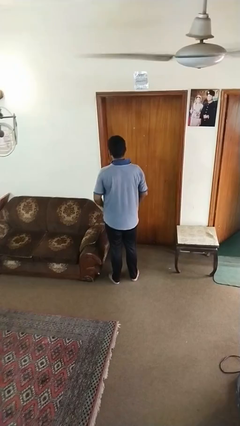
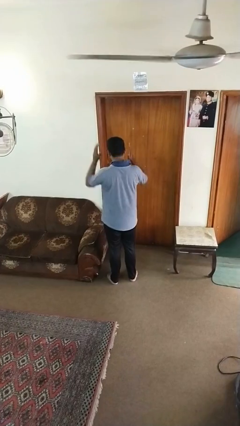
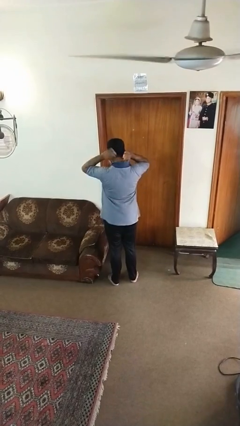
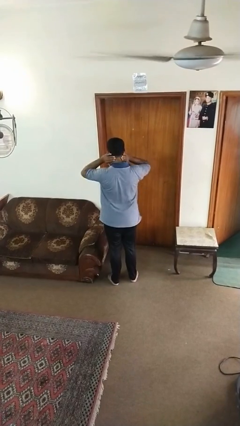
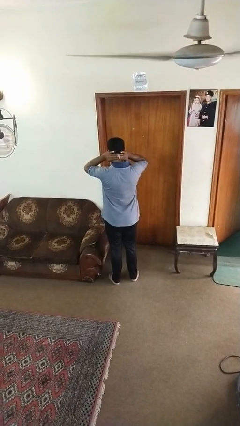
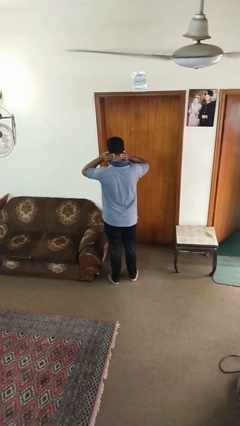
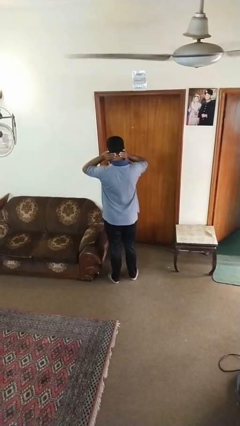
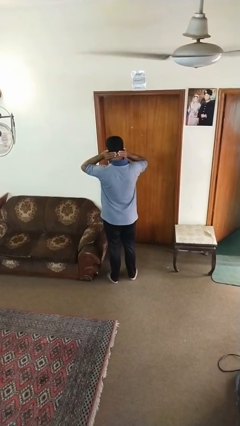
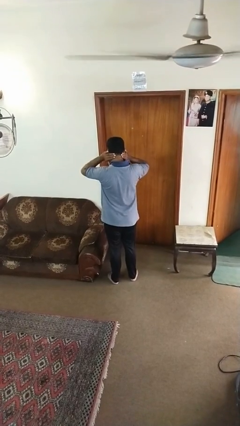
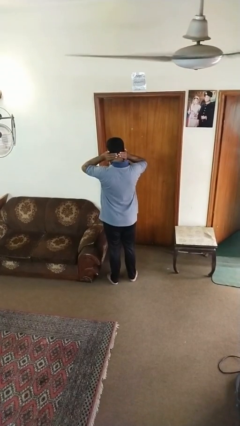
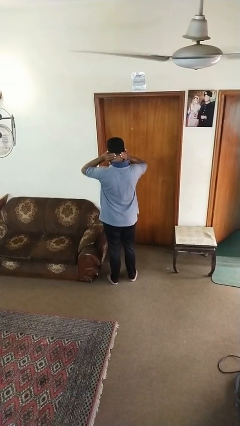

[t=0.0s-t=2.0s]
person rubs neck

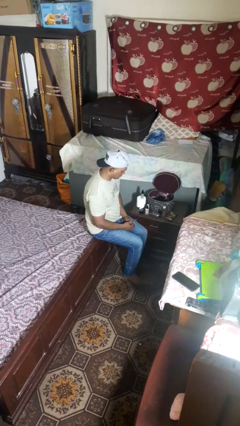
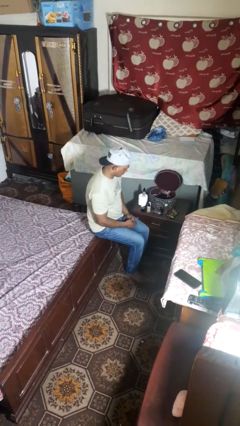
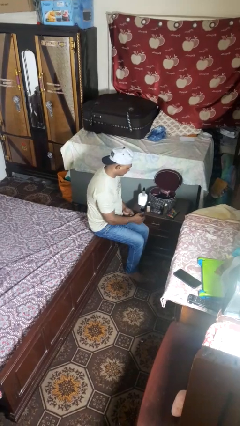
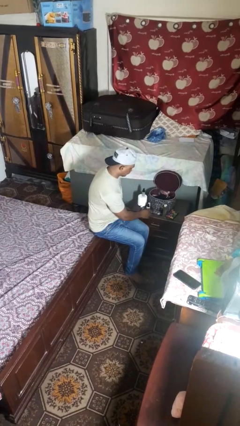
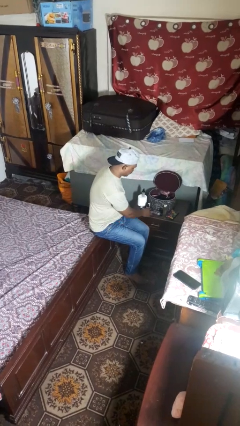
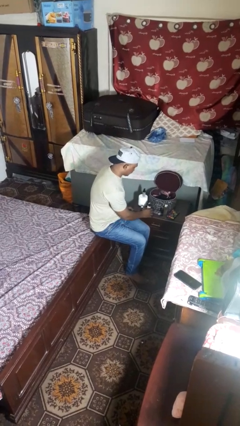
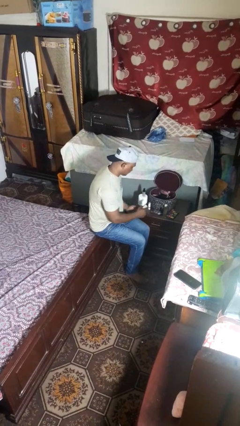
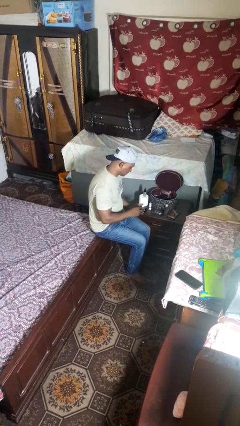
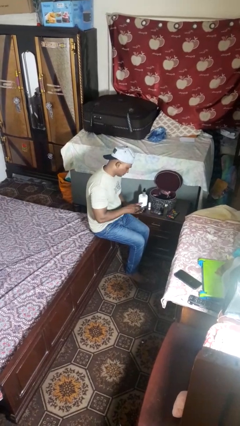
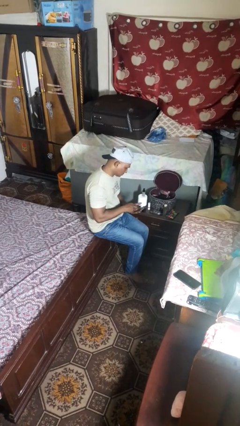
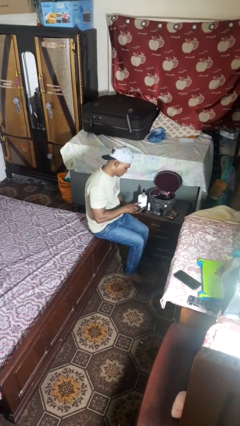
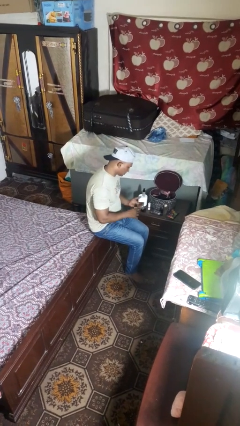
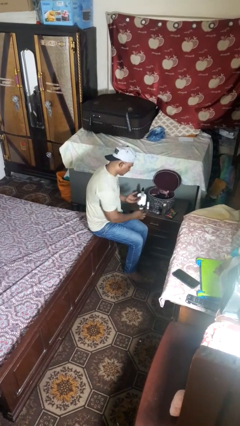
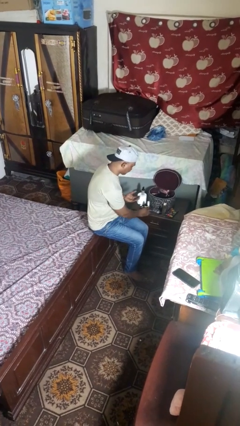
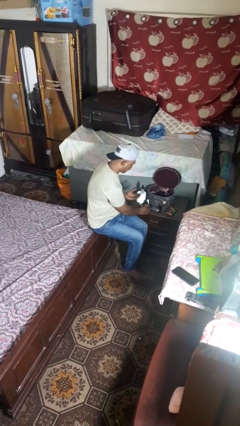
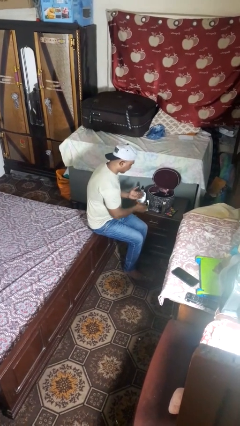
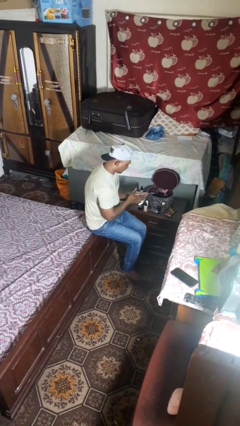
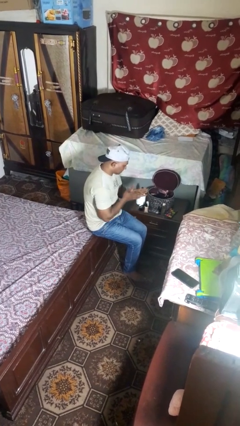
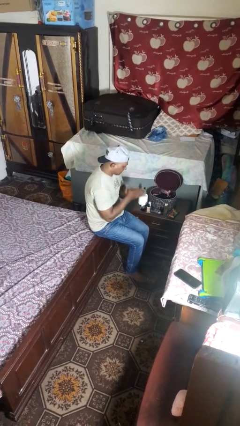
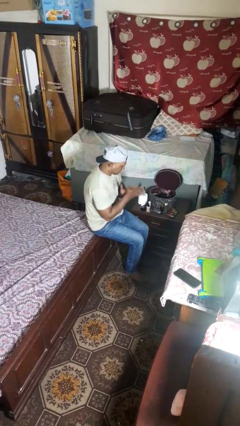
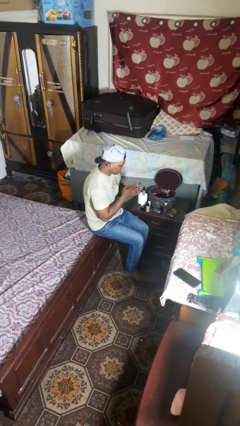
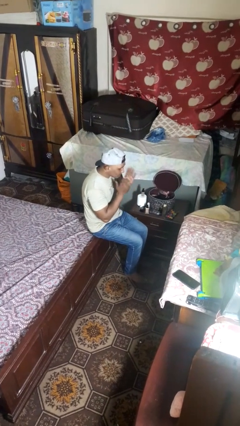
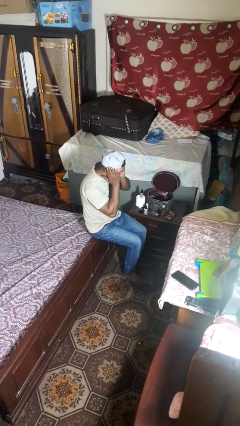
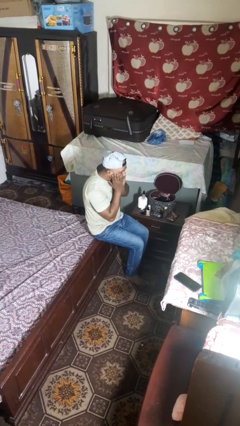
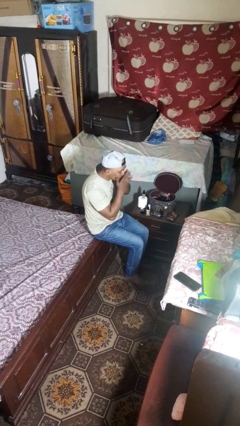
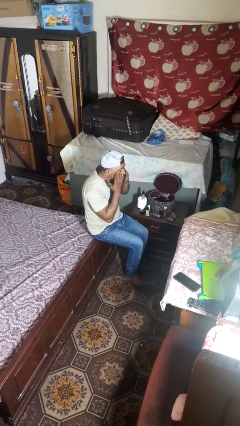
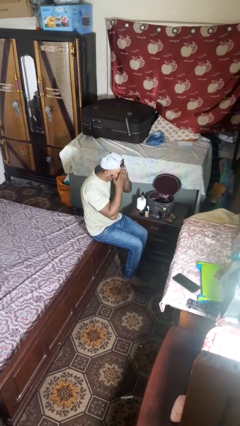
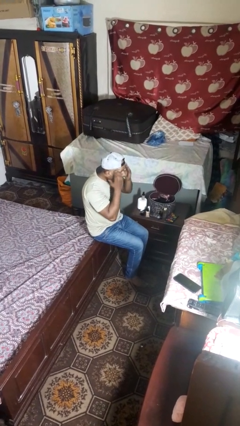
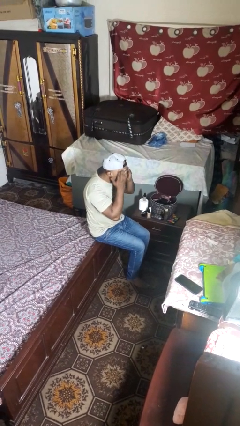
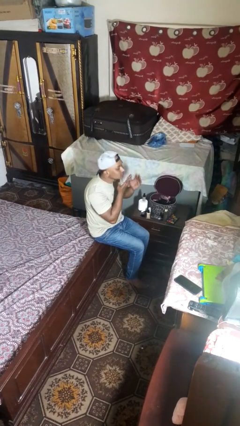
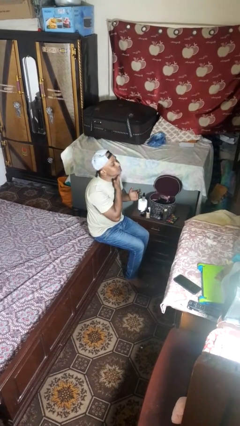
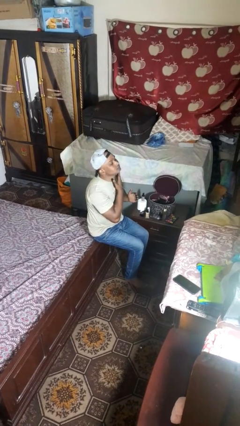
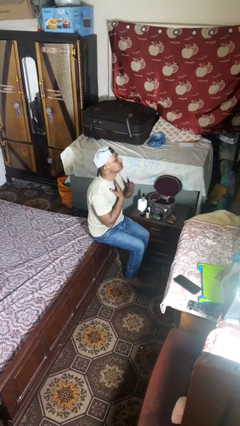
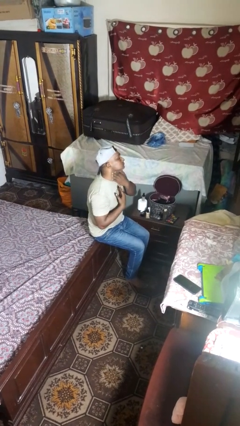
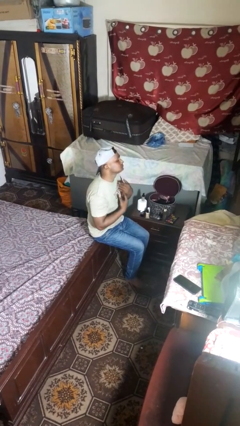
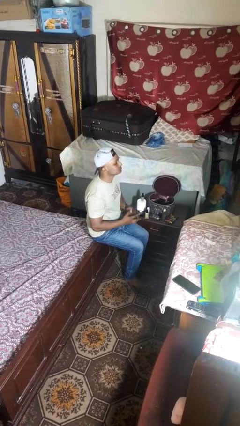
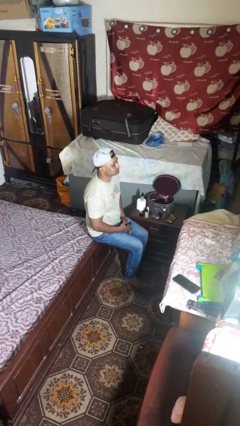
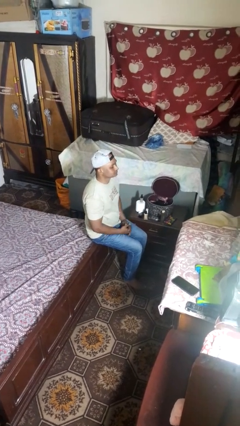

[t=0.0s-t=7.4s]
person applies foundation makeup

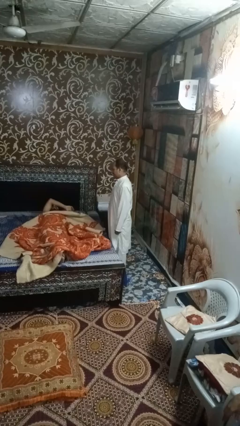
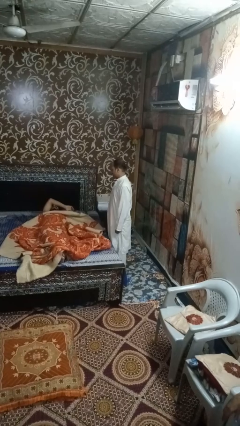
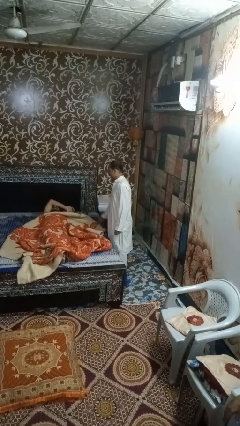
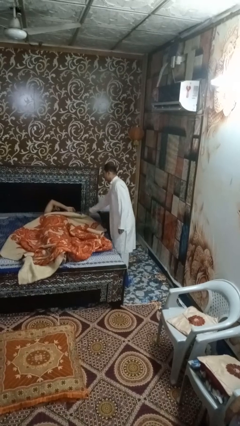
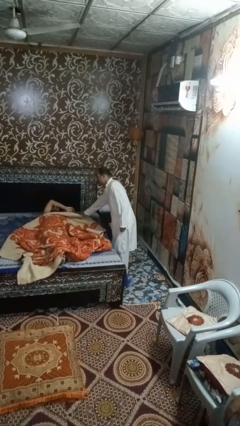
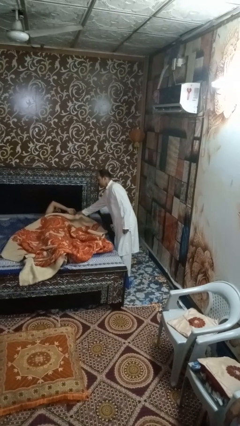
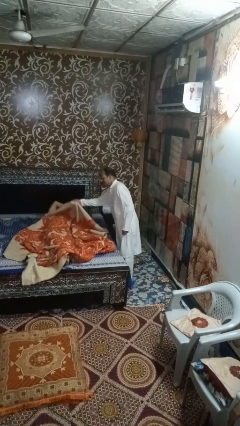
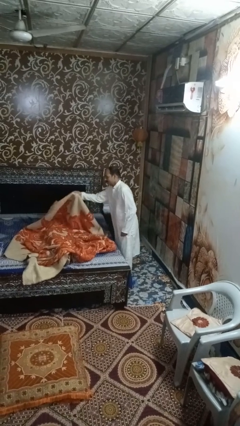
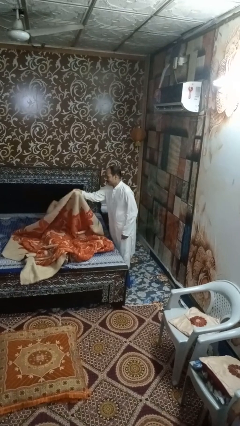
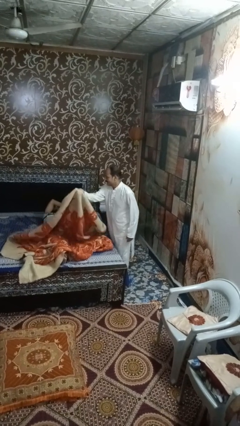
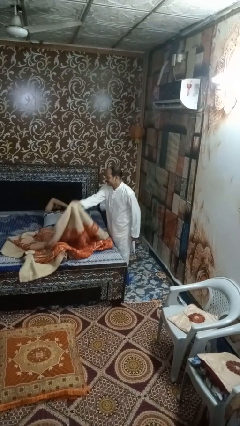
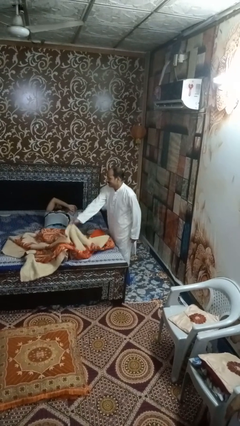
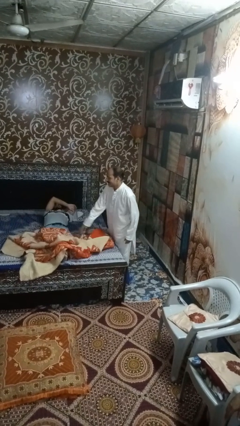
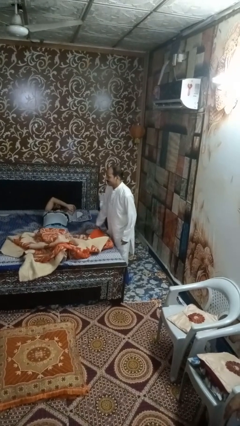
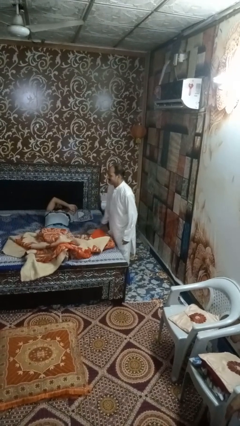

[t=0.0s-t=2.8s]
person uncovers friend with blanket

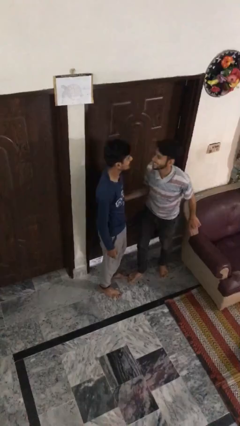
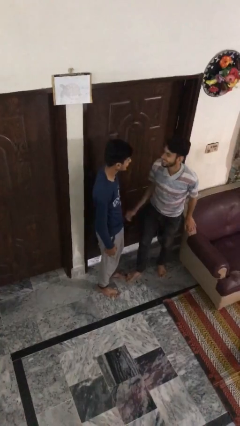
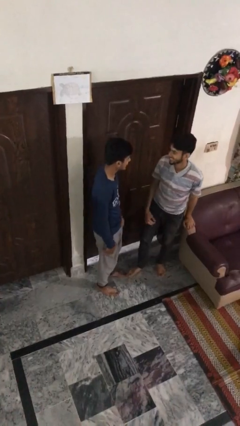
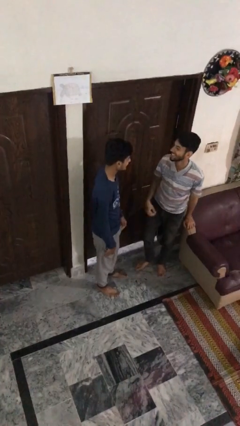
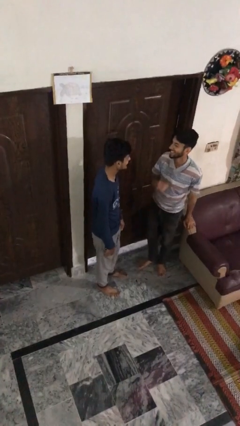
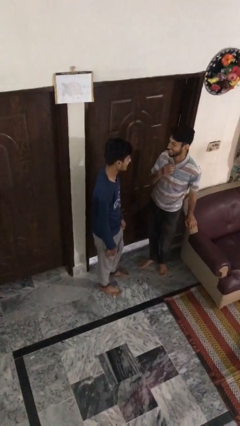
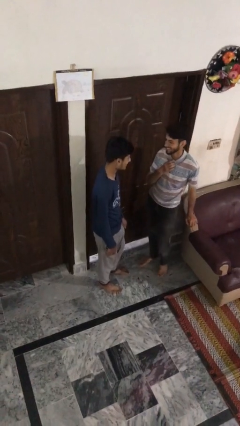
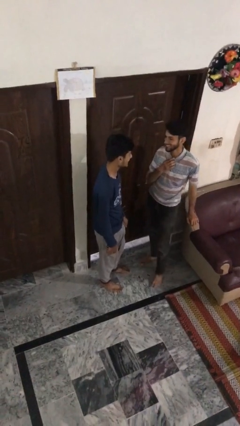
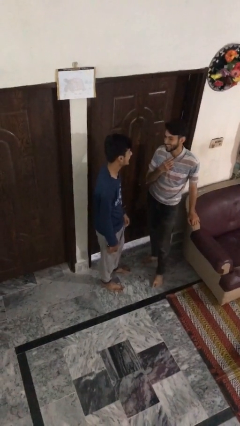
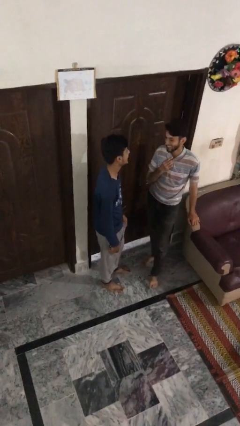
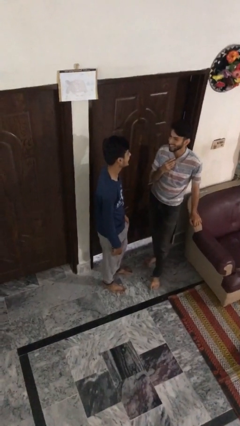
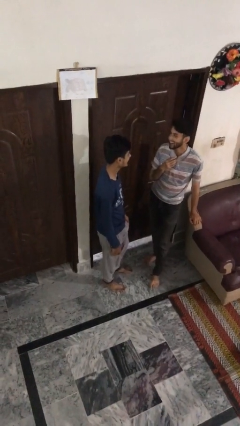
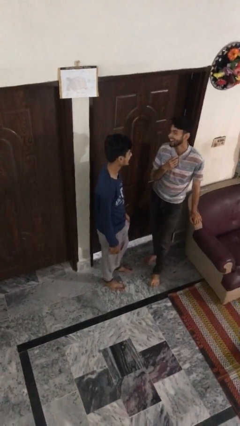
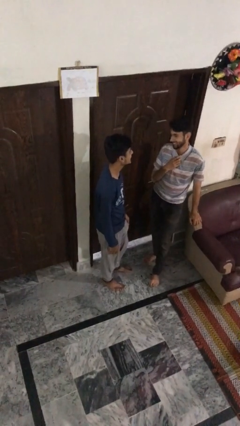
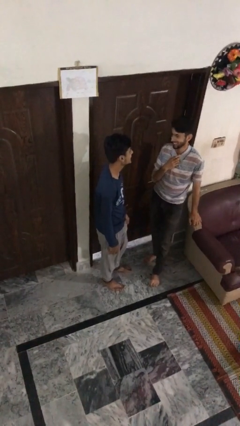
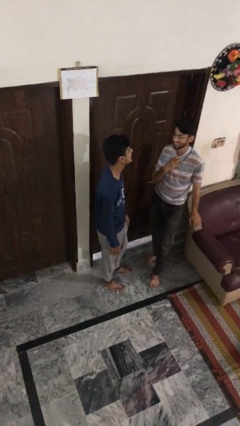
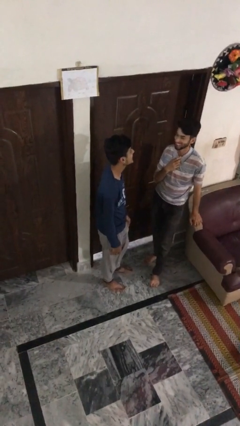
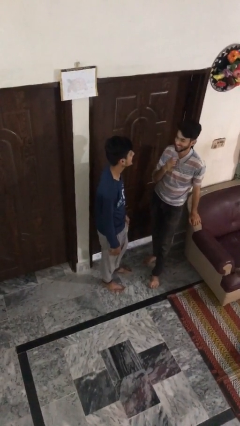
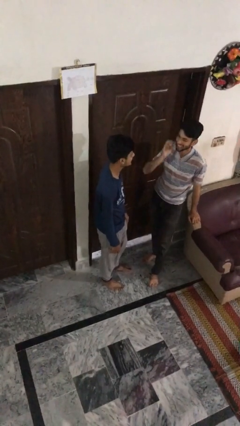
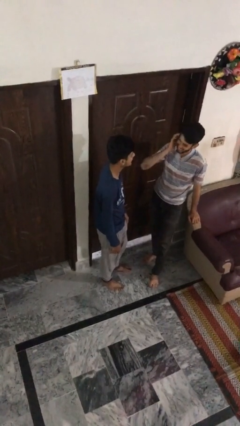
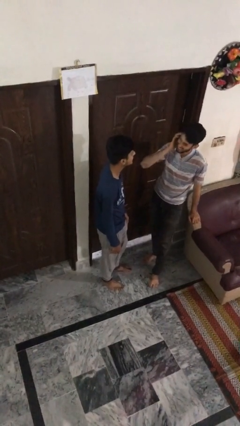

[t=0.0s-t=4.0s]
person talks to person

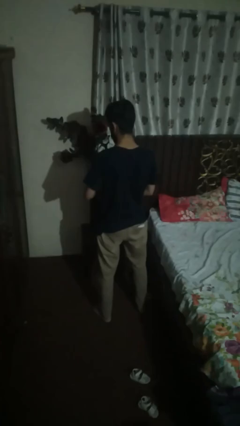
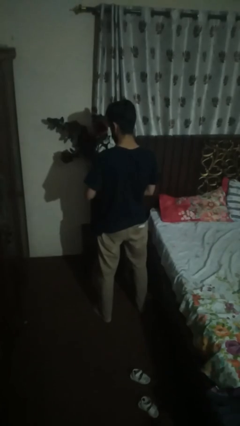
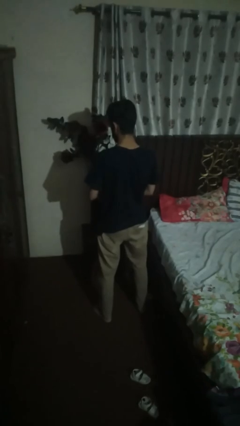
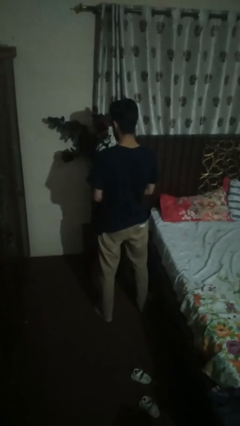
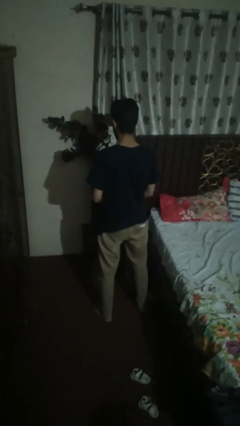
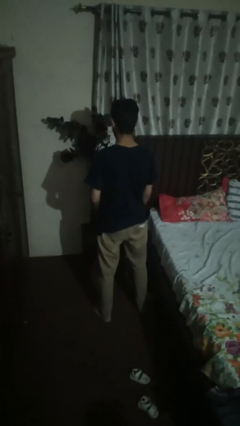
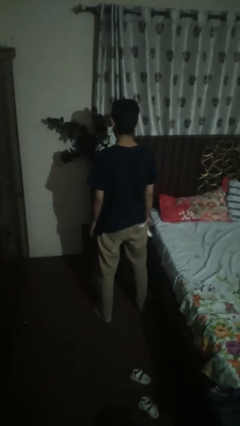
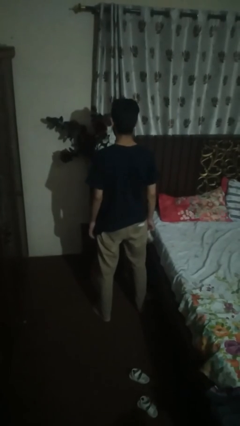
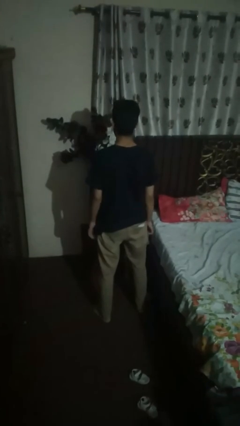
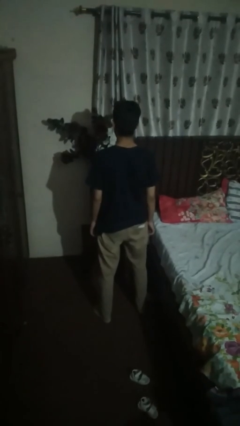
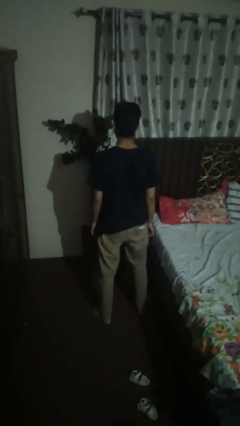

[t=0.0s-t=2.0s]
person takes off wristwatch
